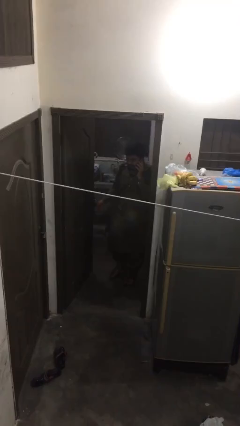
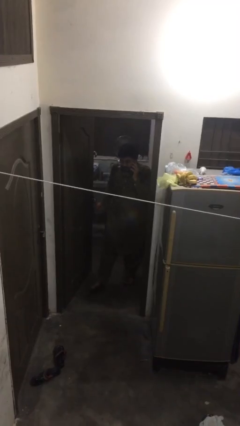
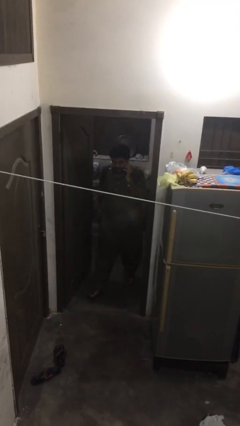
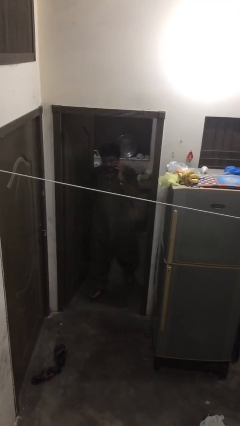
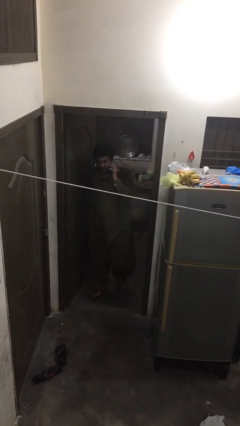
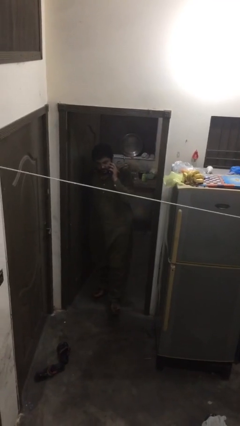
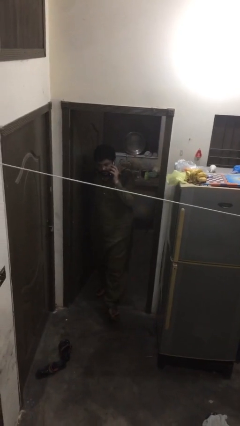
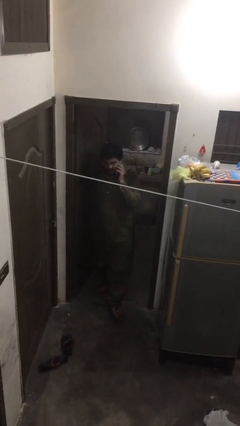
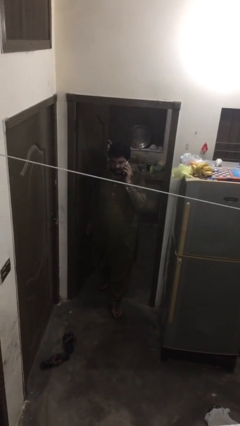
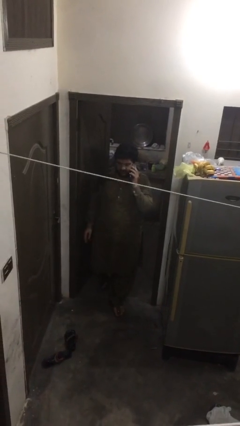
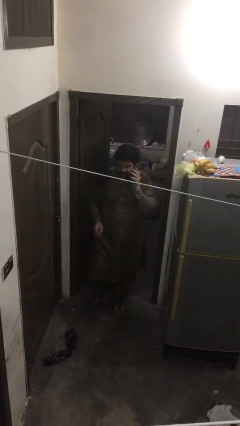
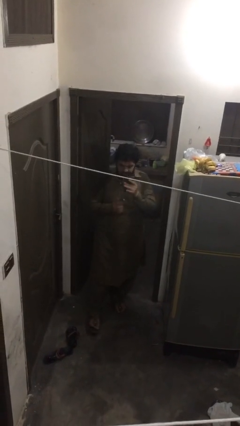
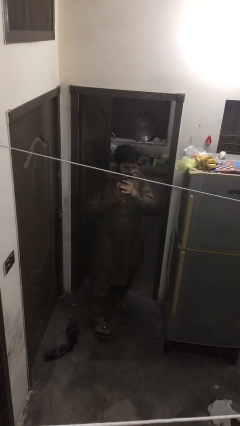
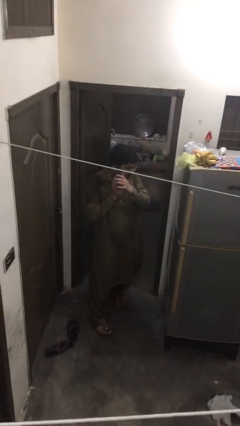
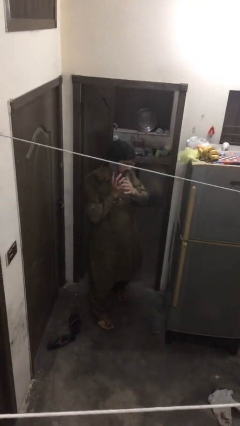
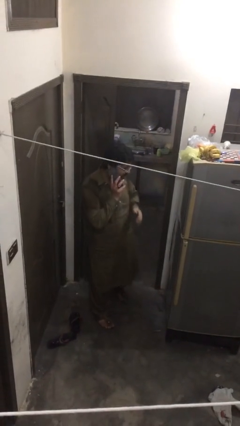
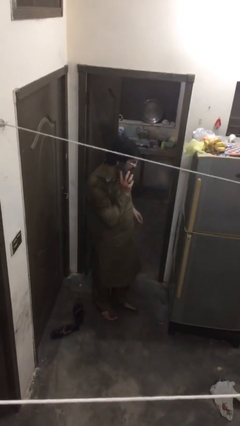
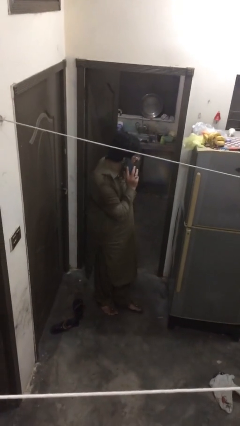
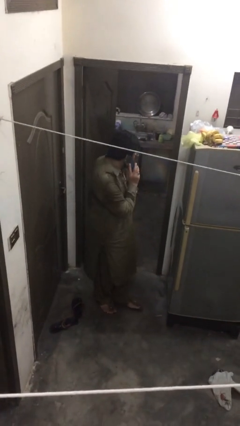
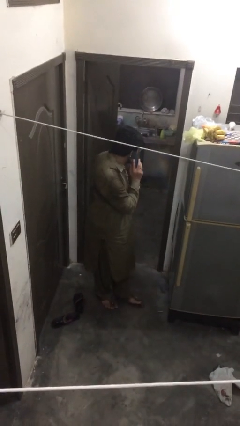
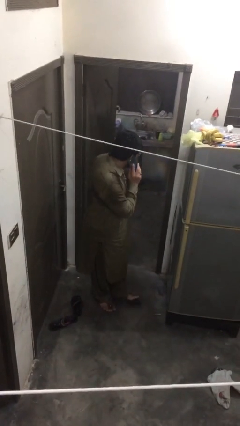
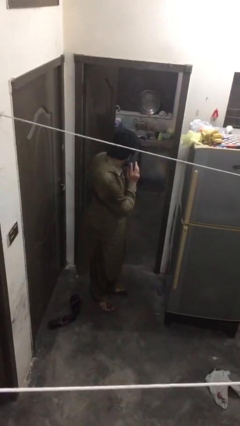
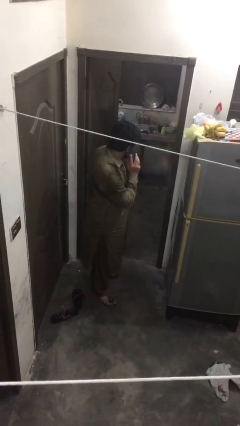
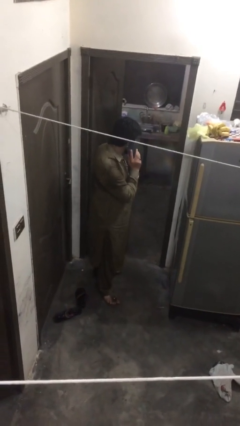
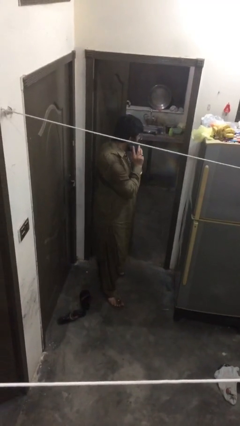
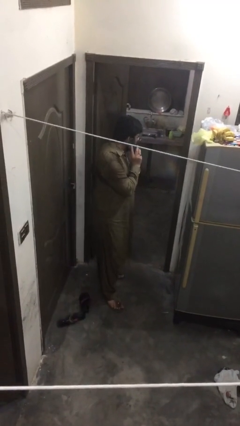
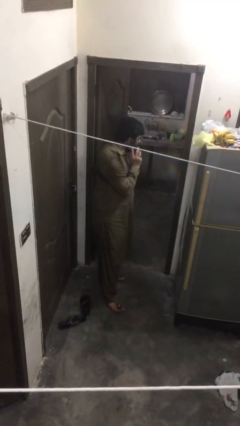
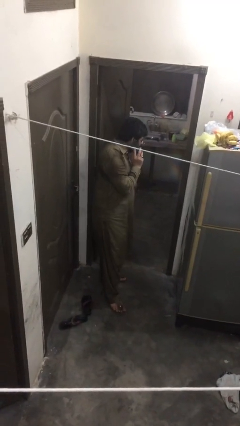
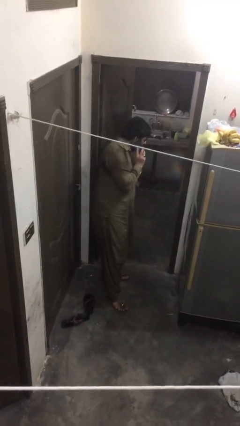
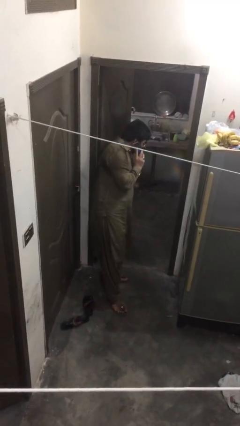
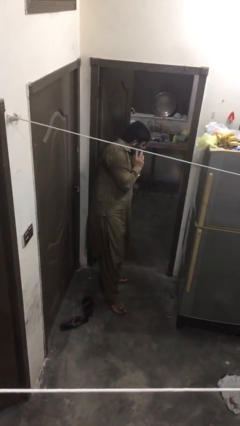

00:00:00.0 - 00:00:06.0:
person enters scene through structure

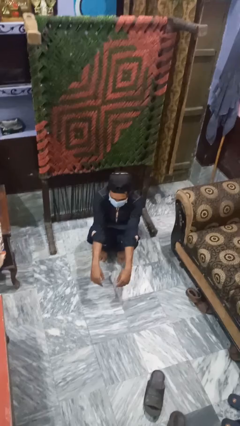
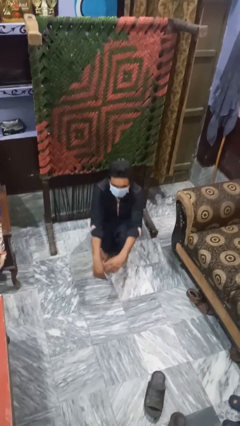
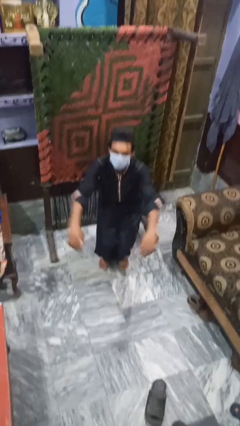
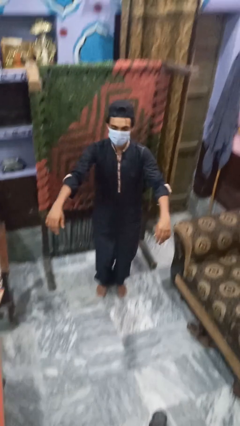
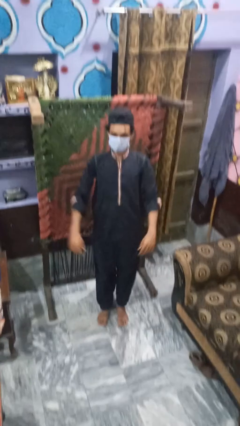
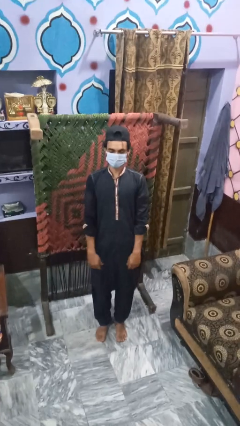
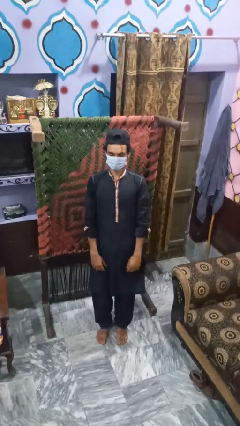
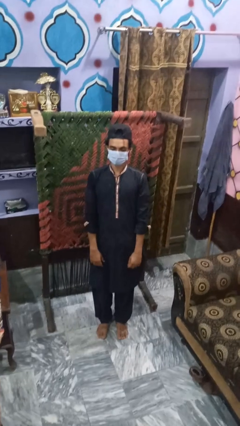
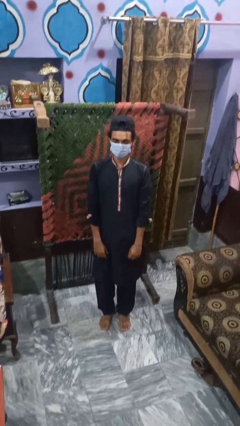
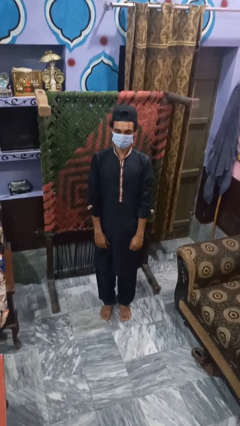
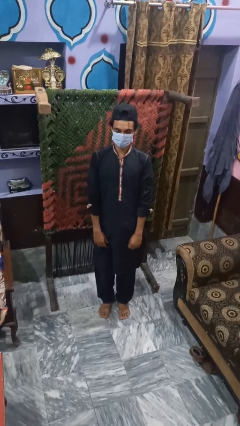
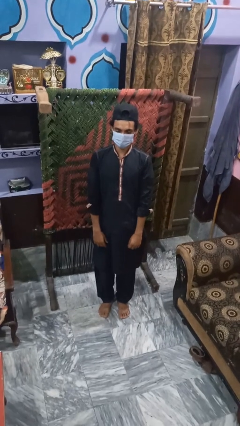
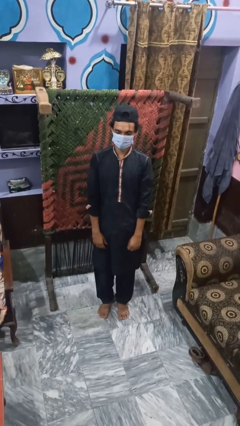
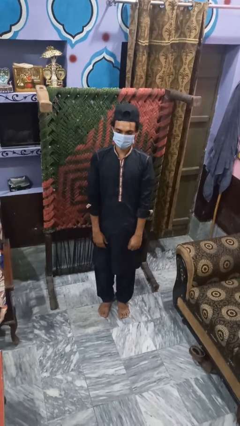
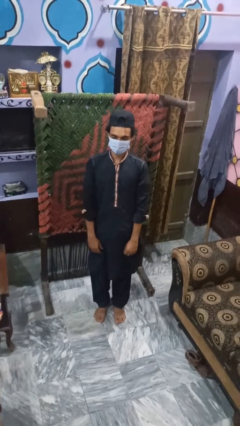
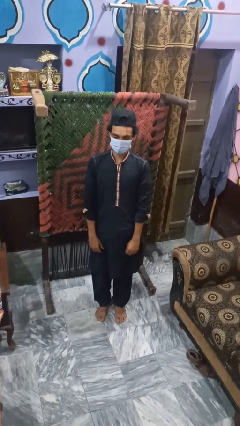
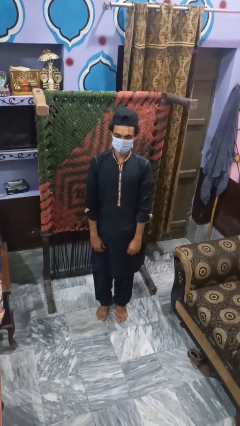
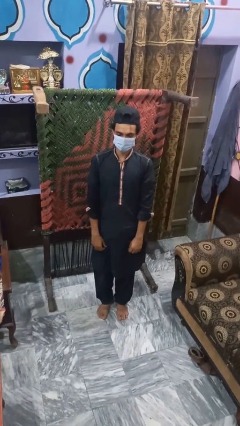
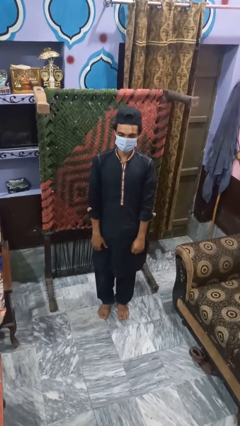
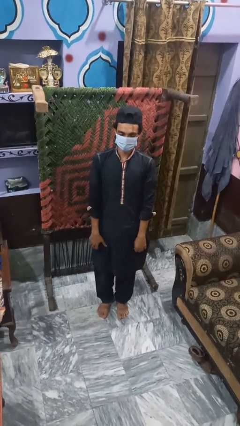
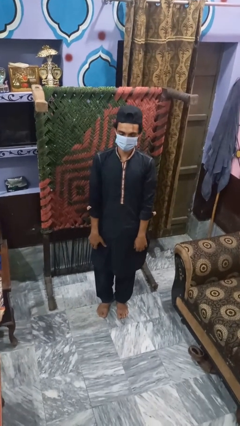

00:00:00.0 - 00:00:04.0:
person stands up

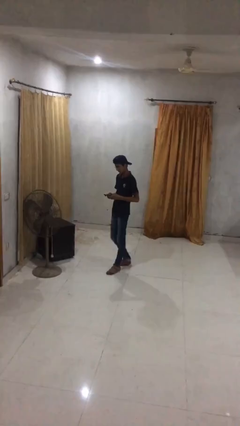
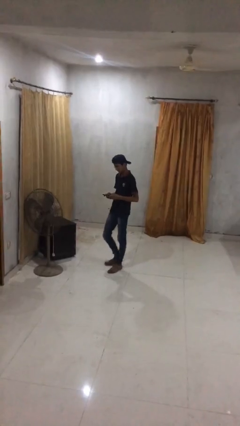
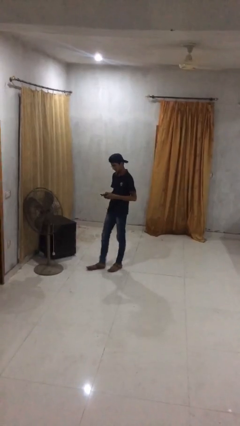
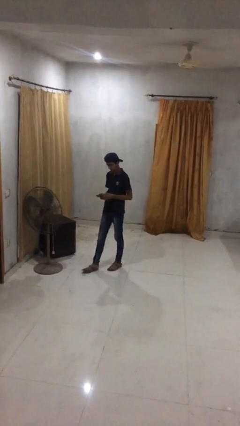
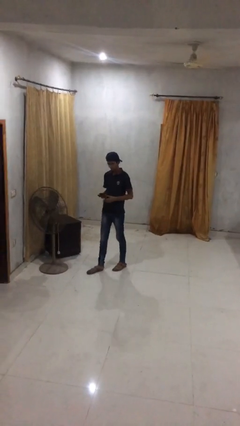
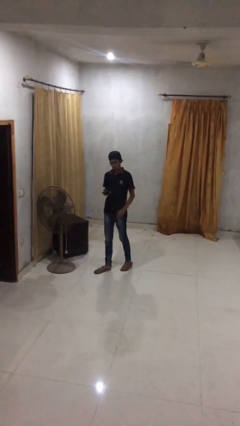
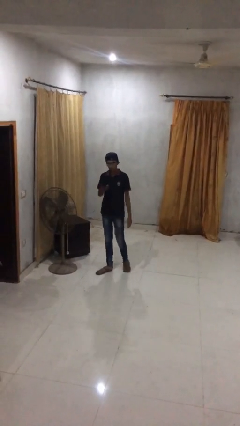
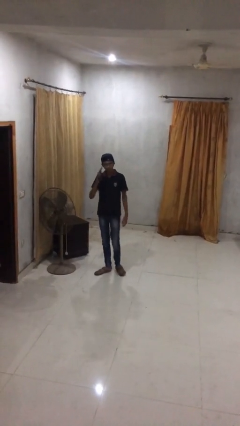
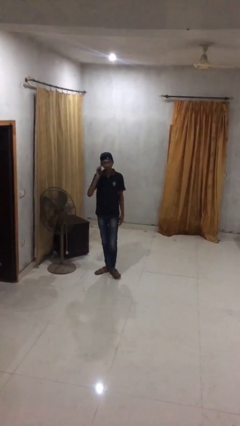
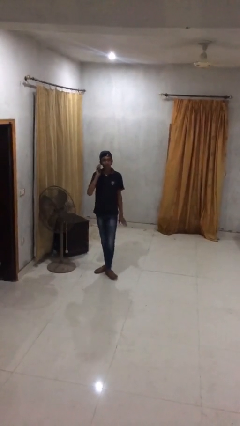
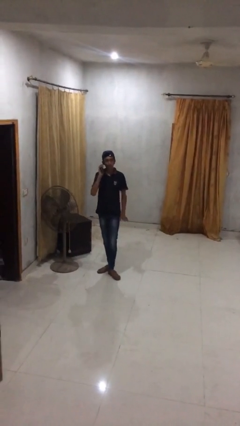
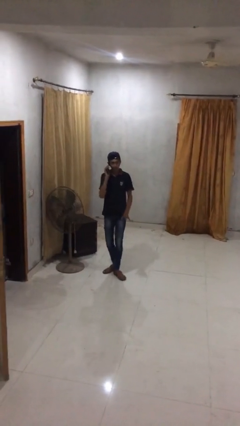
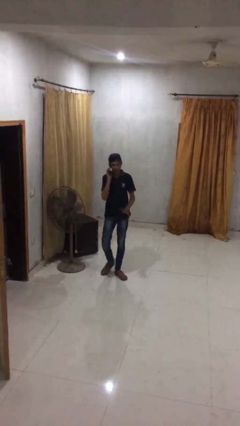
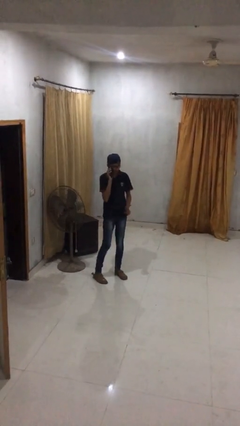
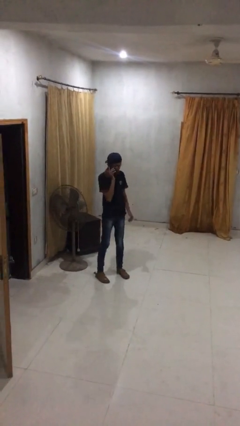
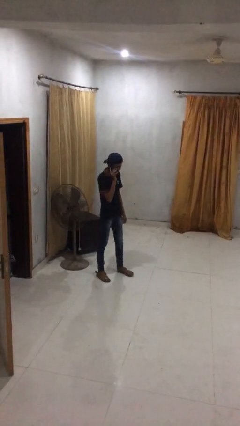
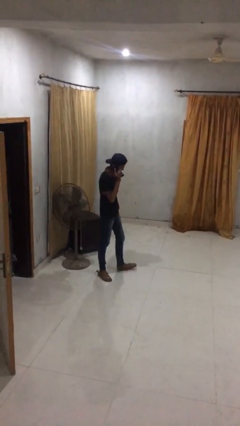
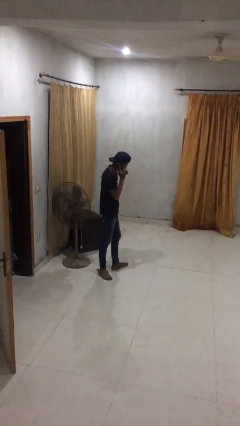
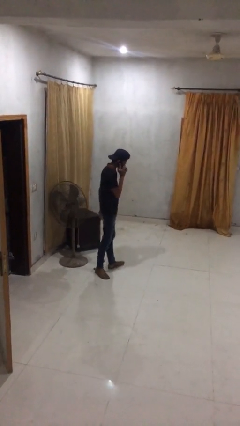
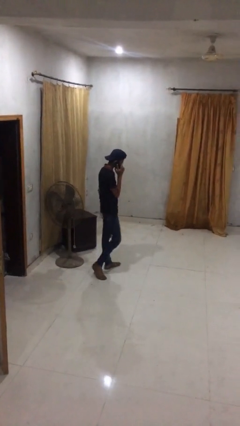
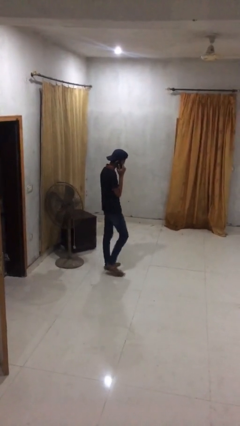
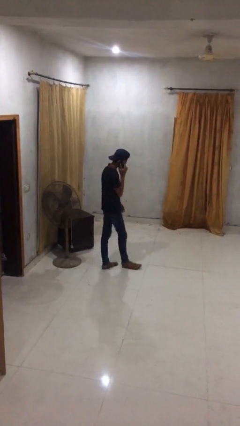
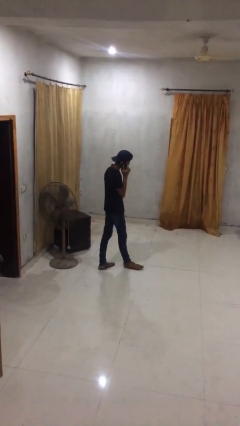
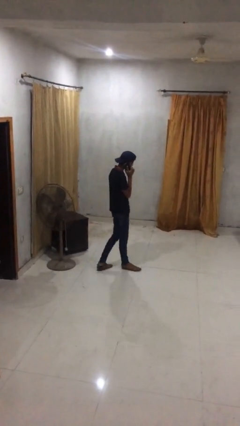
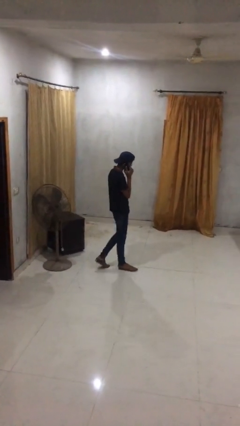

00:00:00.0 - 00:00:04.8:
person talks on phone

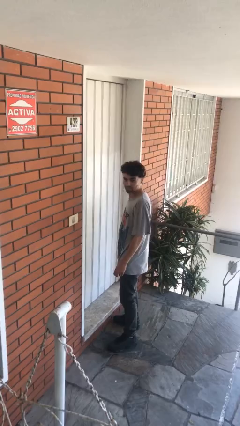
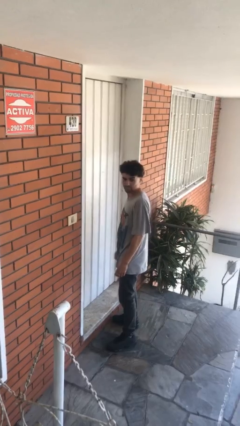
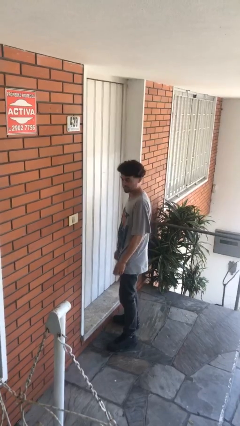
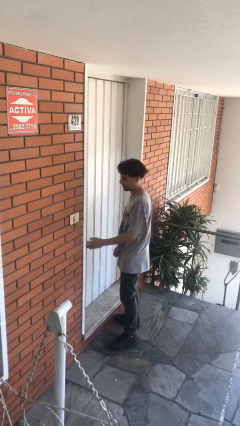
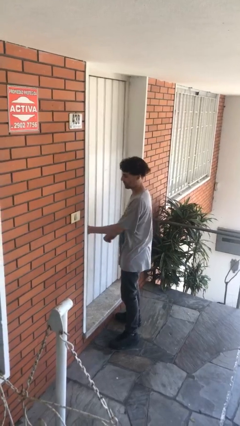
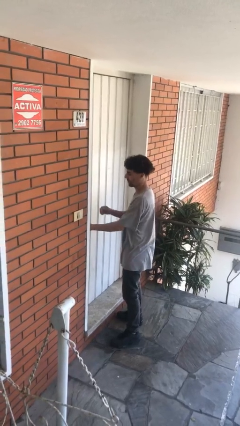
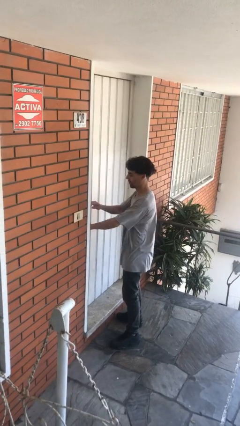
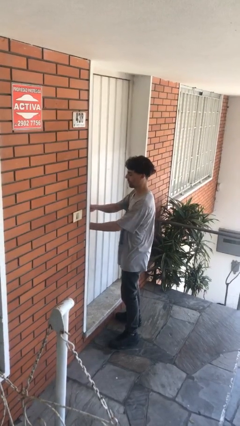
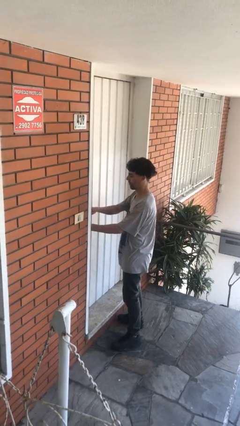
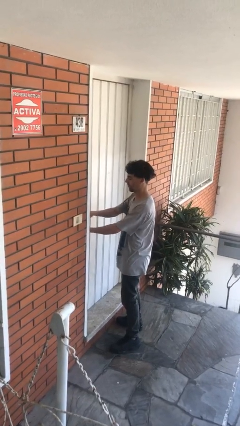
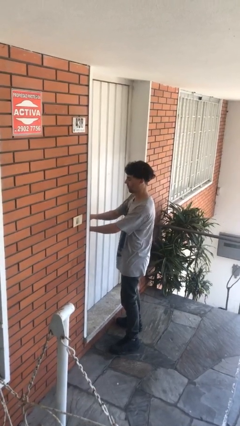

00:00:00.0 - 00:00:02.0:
person unlocks door with keys

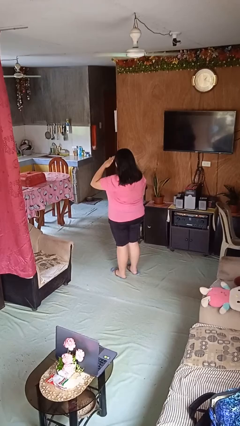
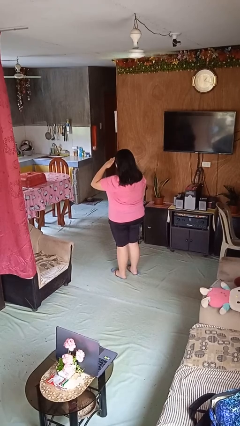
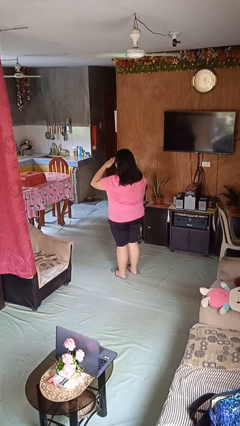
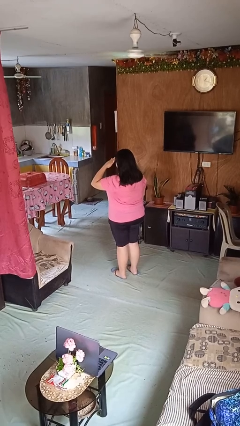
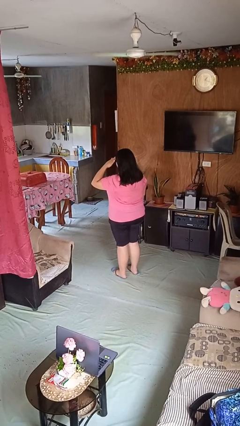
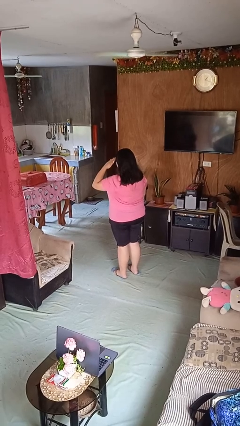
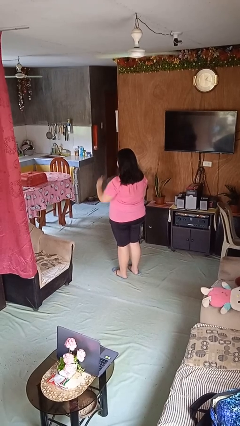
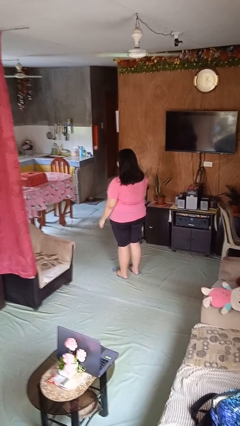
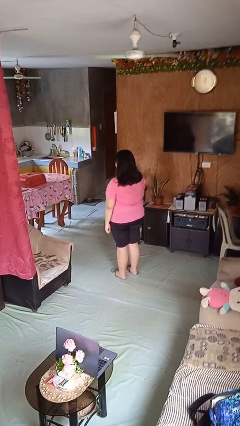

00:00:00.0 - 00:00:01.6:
person salutes
